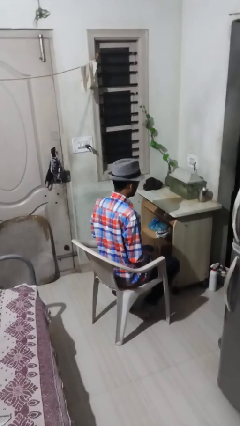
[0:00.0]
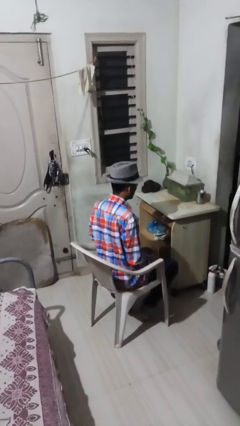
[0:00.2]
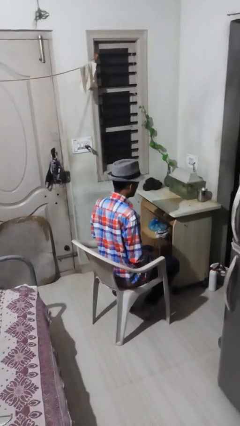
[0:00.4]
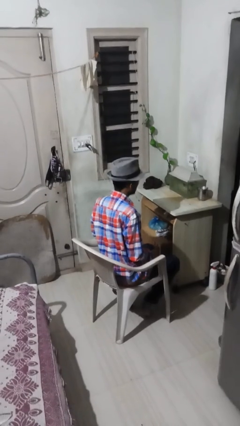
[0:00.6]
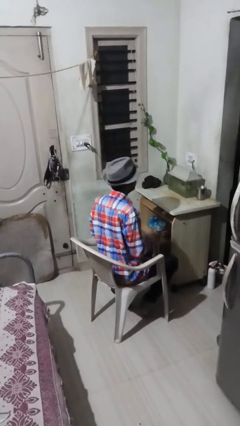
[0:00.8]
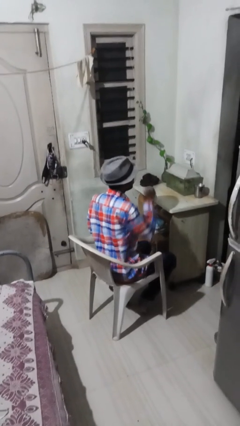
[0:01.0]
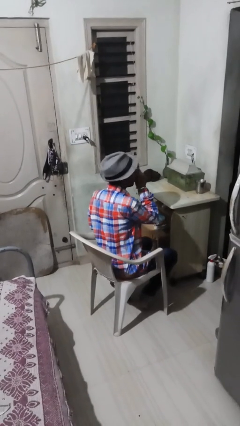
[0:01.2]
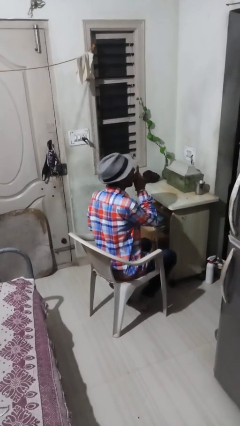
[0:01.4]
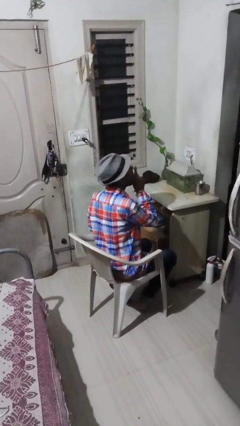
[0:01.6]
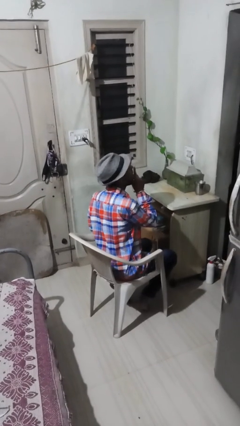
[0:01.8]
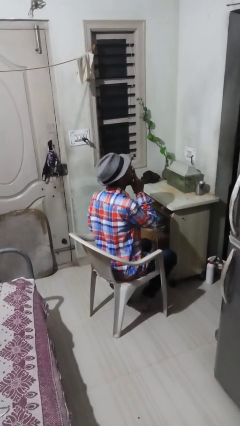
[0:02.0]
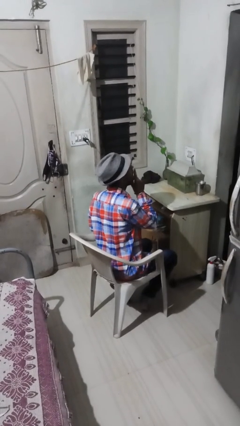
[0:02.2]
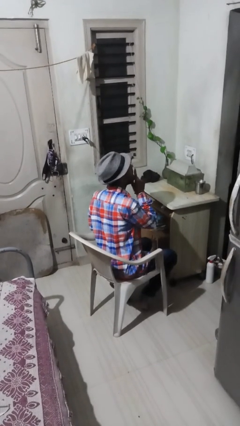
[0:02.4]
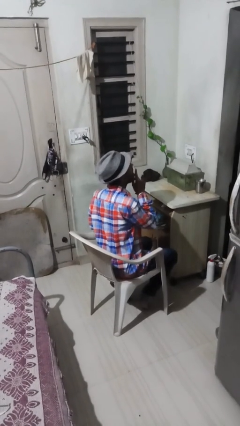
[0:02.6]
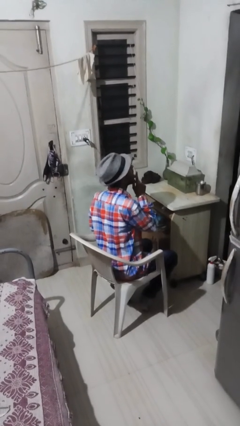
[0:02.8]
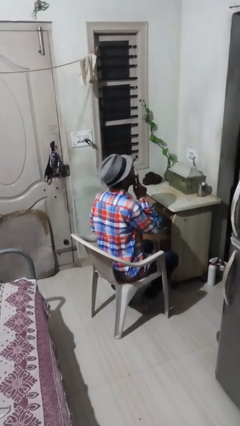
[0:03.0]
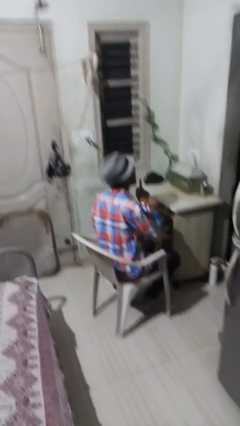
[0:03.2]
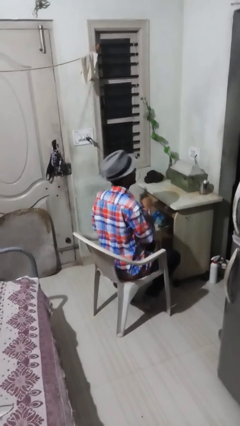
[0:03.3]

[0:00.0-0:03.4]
person licks fingers

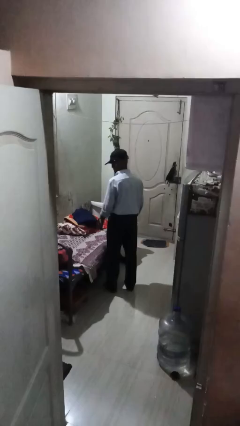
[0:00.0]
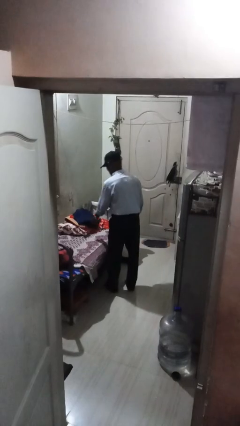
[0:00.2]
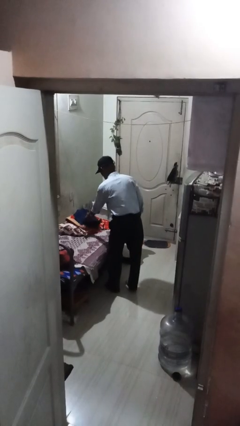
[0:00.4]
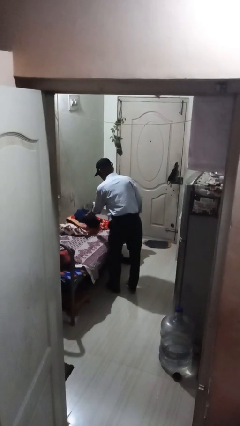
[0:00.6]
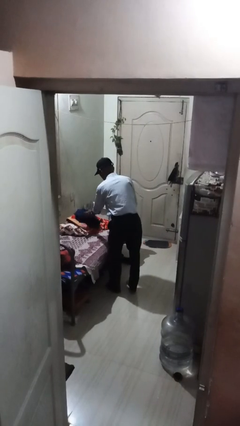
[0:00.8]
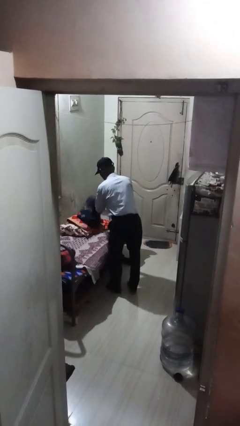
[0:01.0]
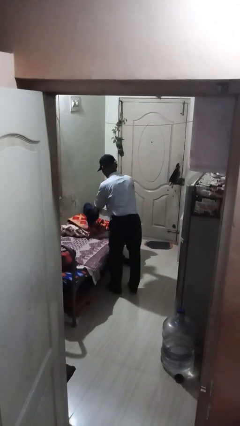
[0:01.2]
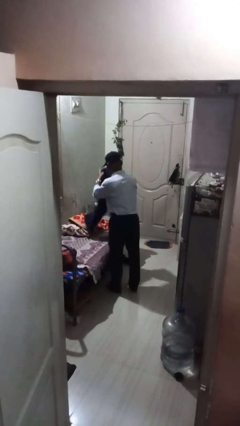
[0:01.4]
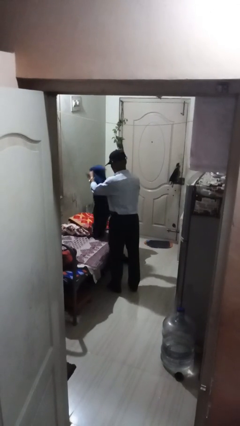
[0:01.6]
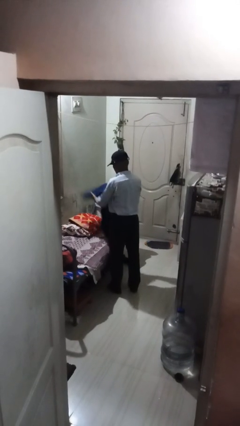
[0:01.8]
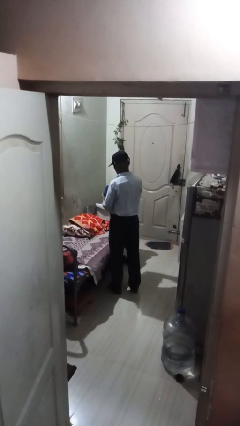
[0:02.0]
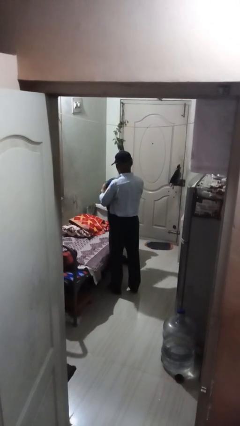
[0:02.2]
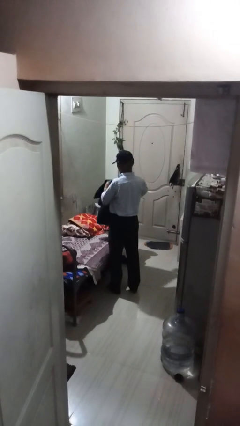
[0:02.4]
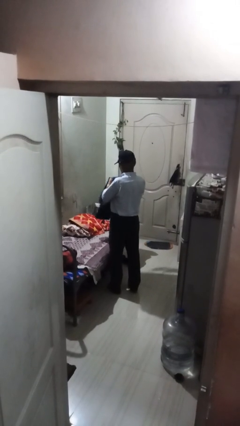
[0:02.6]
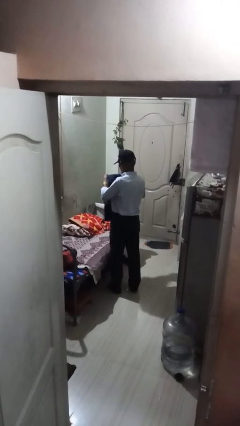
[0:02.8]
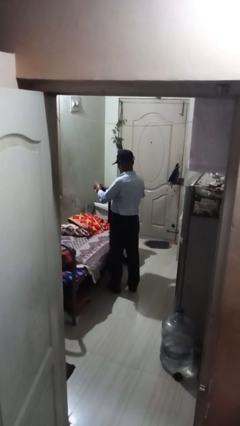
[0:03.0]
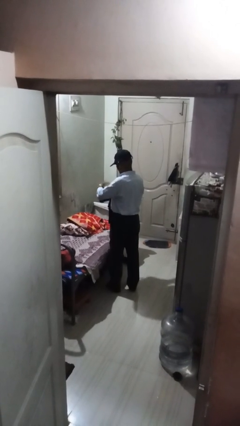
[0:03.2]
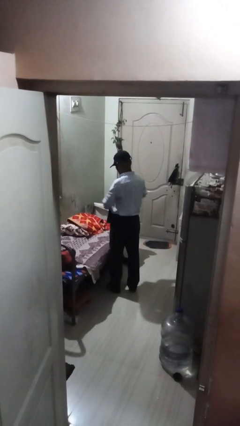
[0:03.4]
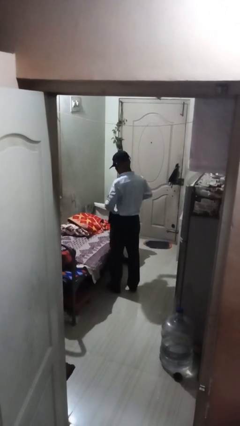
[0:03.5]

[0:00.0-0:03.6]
person folds pants

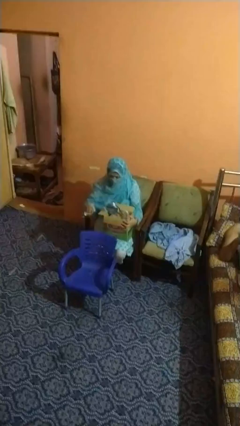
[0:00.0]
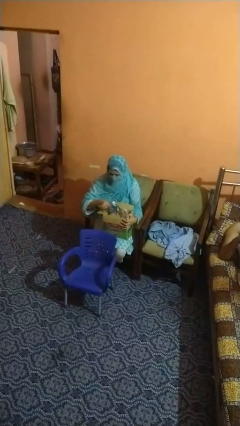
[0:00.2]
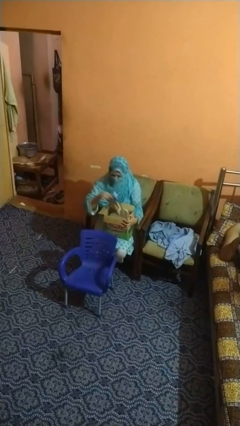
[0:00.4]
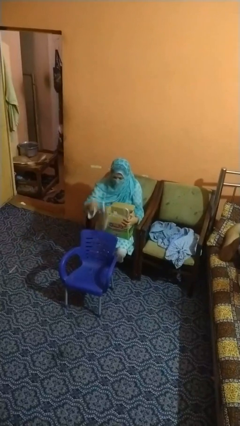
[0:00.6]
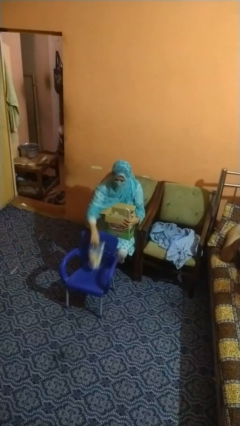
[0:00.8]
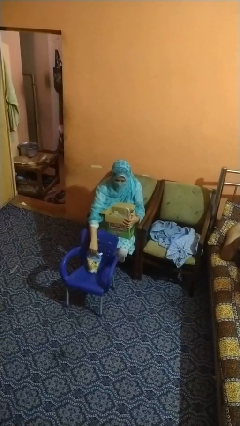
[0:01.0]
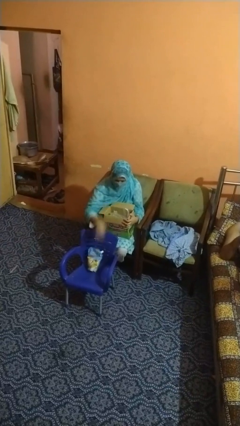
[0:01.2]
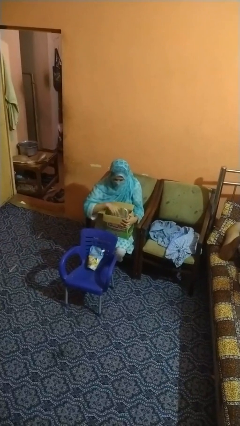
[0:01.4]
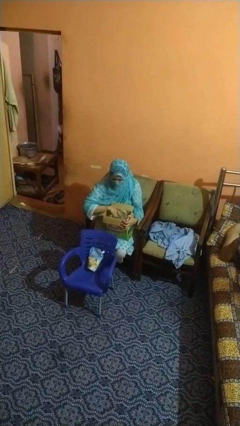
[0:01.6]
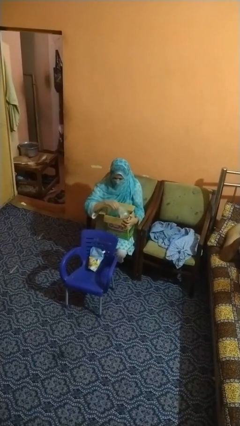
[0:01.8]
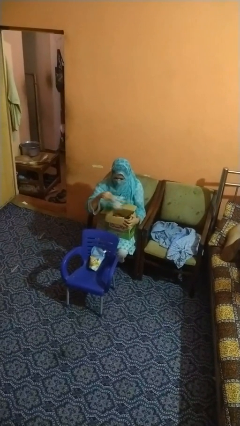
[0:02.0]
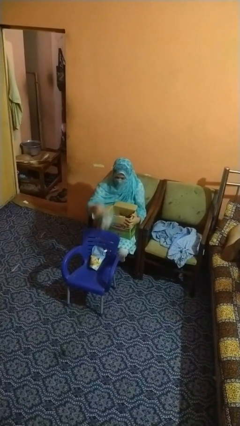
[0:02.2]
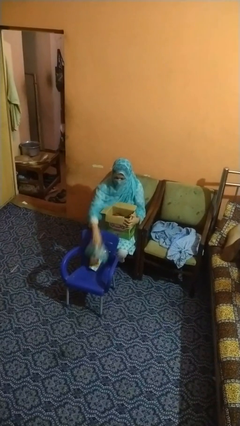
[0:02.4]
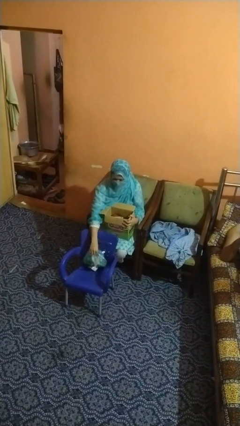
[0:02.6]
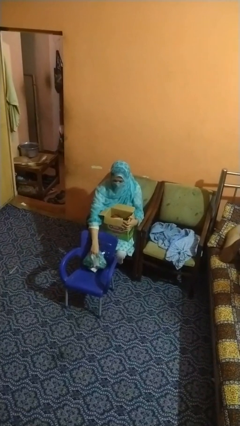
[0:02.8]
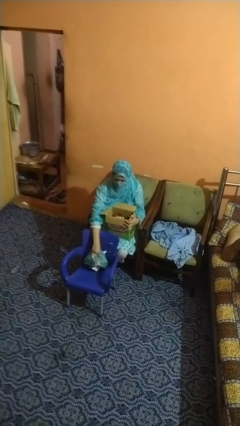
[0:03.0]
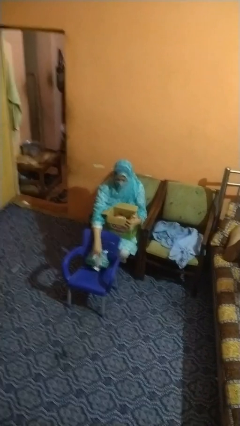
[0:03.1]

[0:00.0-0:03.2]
person takes object from box

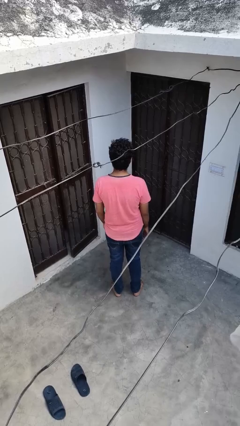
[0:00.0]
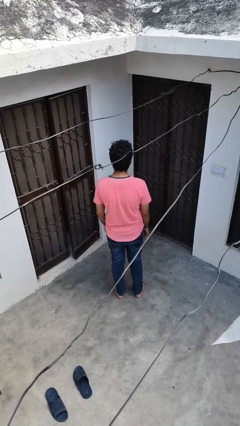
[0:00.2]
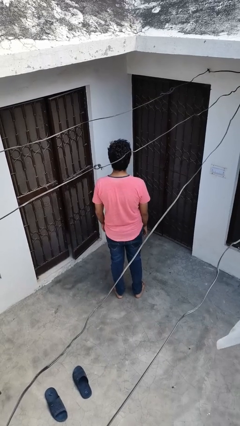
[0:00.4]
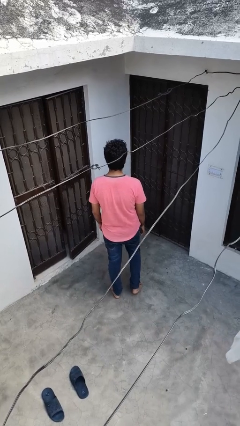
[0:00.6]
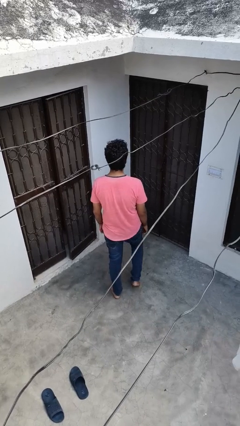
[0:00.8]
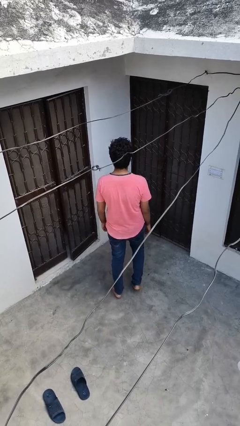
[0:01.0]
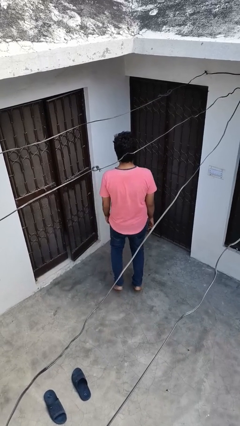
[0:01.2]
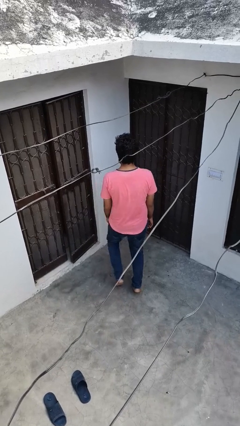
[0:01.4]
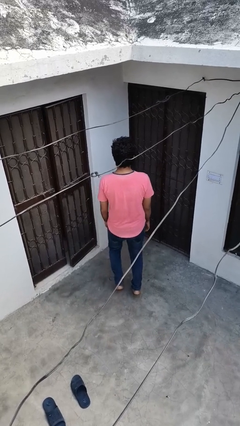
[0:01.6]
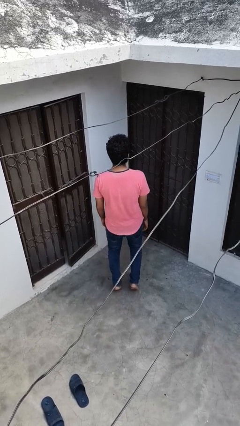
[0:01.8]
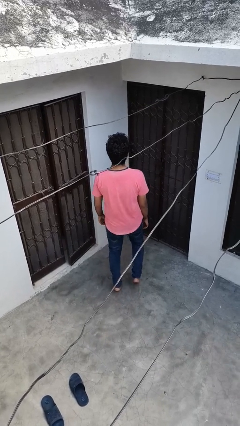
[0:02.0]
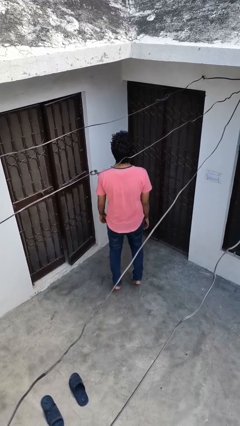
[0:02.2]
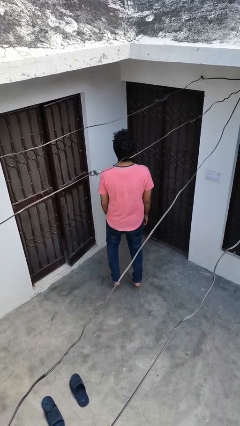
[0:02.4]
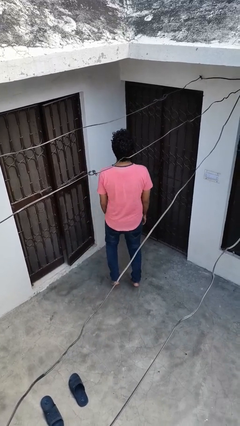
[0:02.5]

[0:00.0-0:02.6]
person walks tiptoe

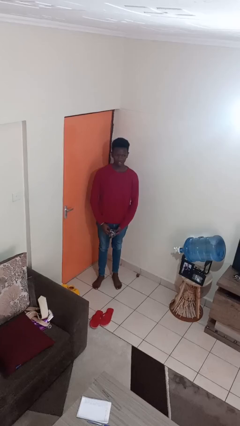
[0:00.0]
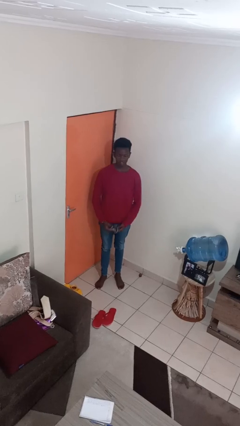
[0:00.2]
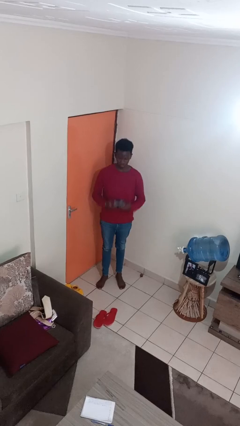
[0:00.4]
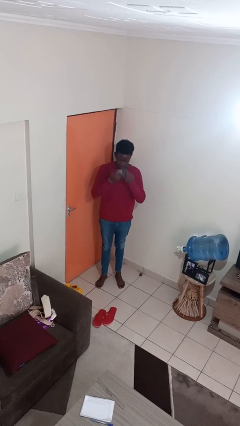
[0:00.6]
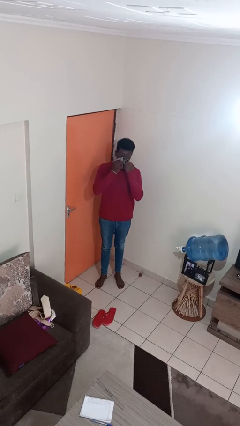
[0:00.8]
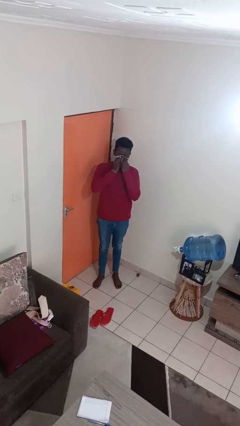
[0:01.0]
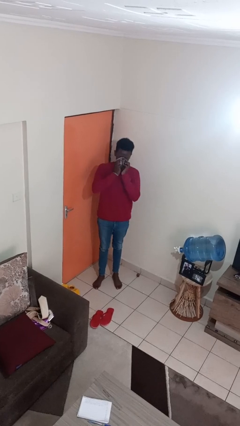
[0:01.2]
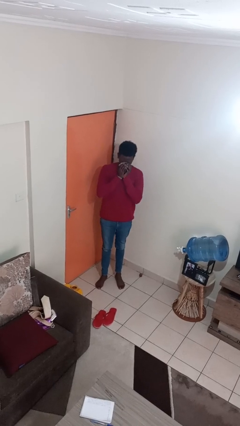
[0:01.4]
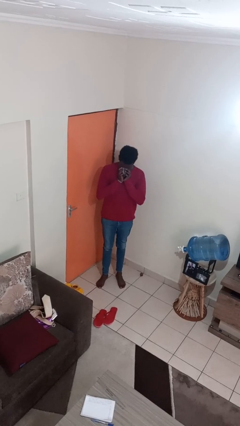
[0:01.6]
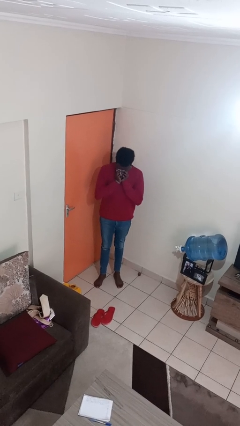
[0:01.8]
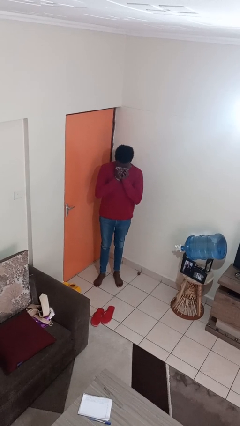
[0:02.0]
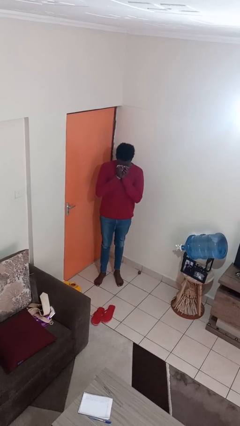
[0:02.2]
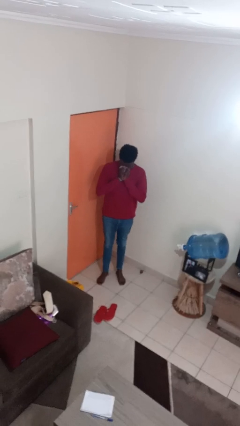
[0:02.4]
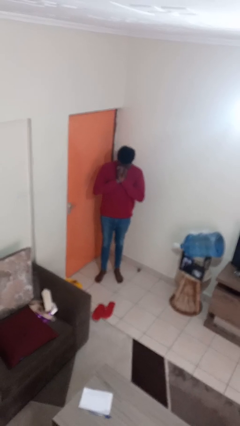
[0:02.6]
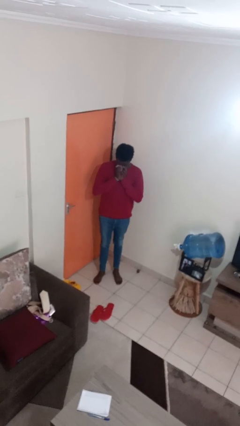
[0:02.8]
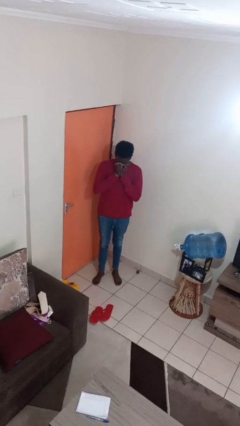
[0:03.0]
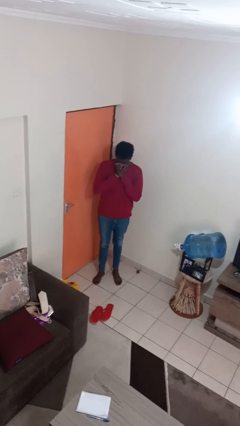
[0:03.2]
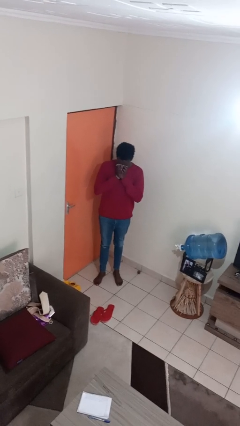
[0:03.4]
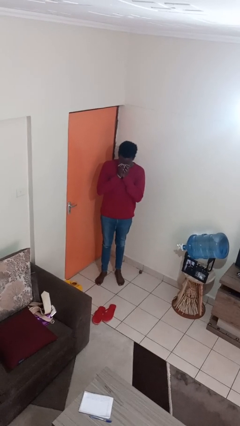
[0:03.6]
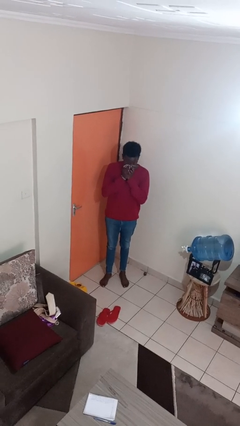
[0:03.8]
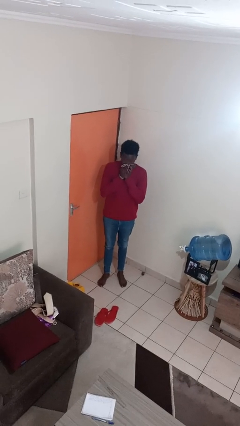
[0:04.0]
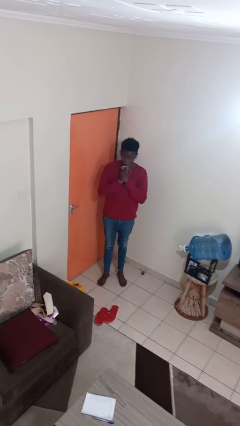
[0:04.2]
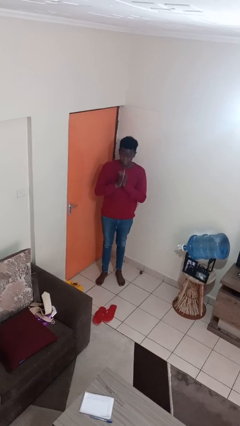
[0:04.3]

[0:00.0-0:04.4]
person blows nose

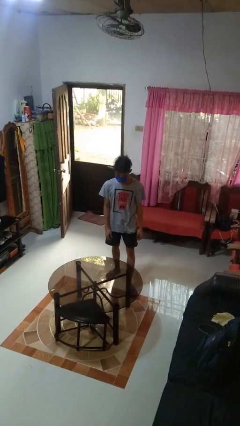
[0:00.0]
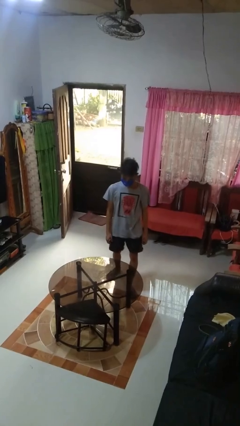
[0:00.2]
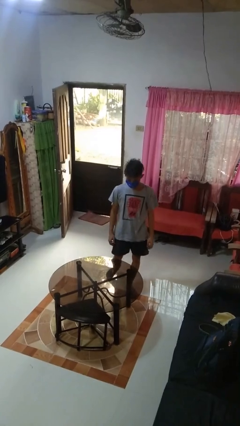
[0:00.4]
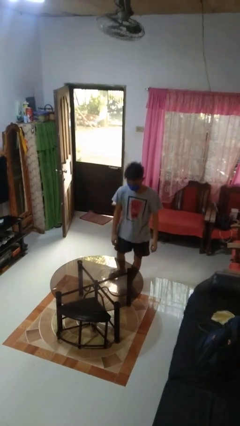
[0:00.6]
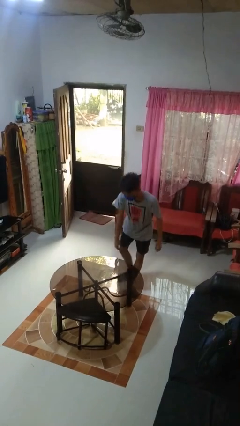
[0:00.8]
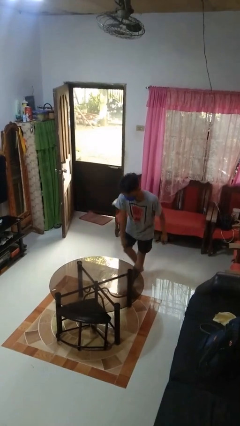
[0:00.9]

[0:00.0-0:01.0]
person bumps into table
